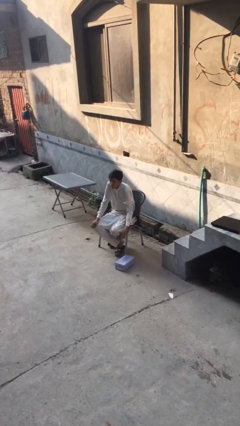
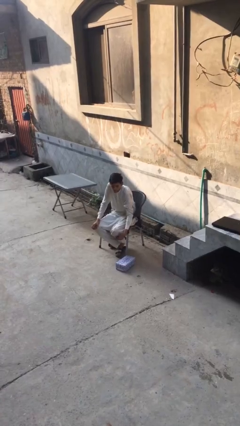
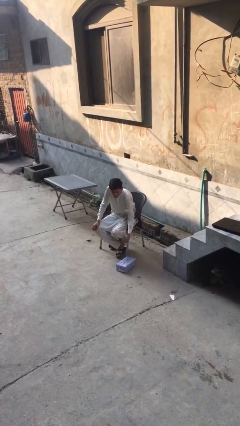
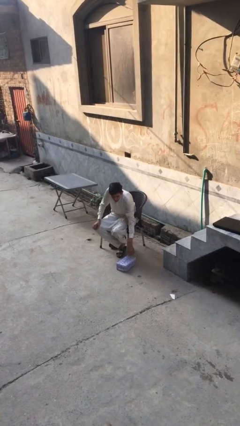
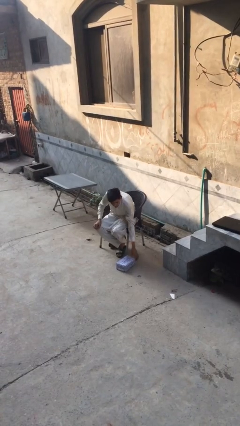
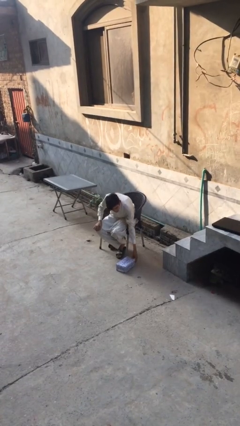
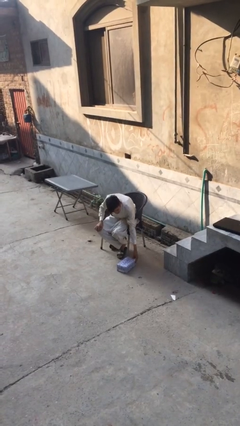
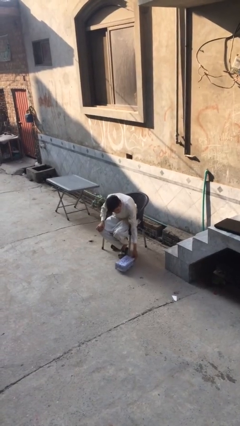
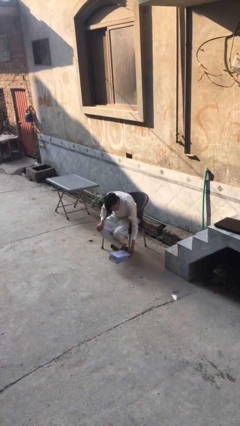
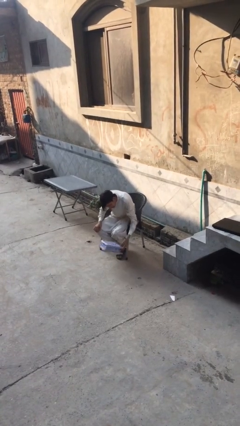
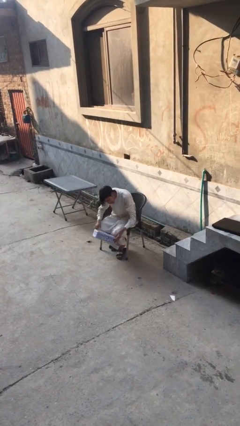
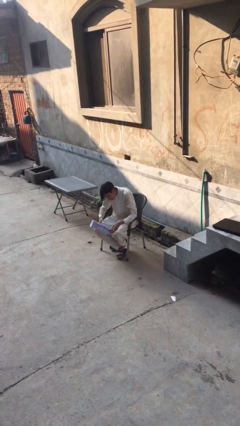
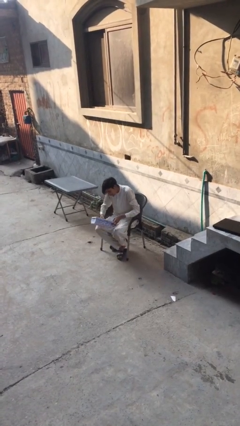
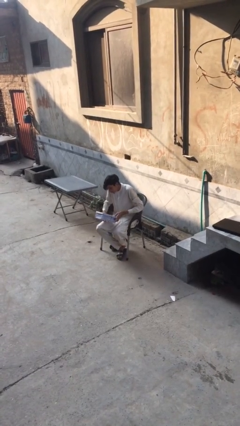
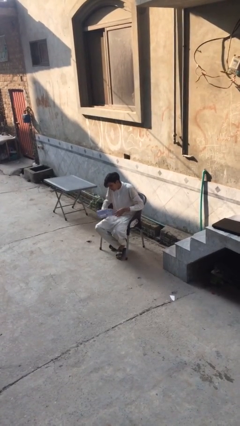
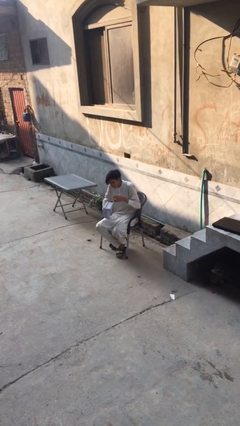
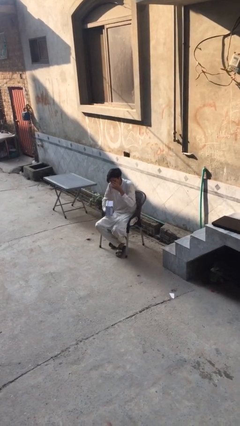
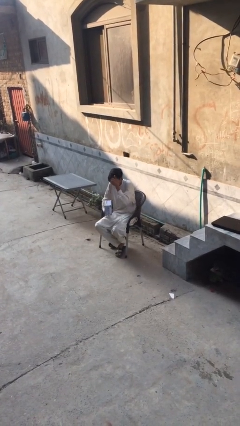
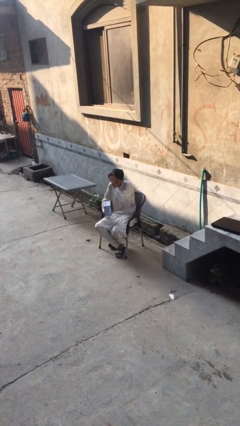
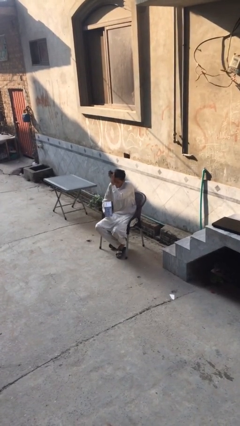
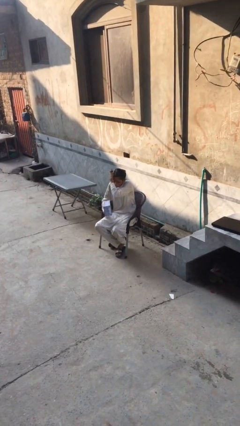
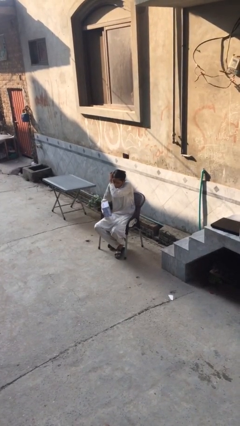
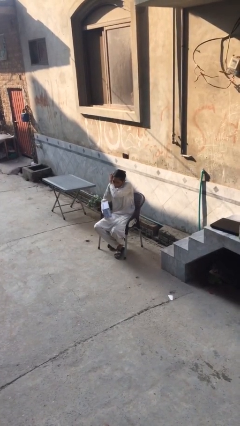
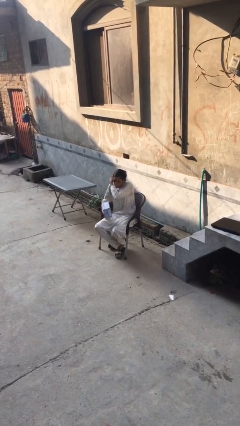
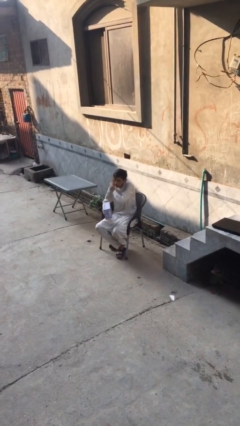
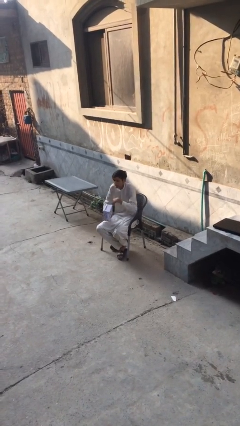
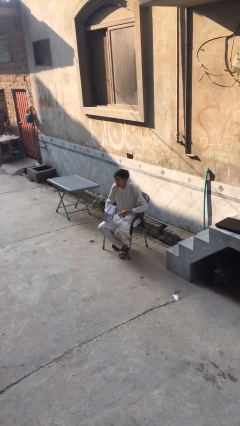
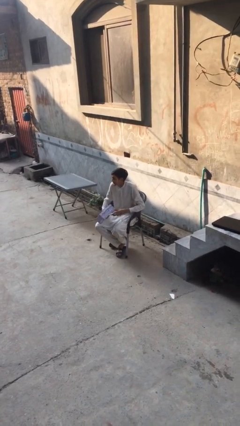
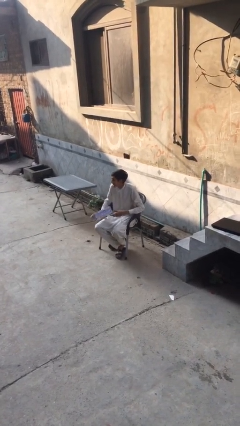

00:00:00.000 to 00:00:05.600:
person picks up object from floor

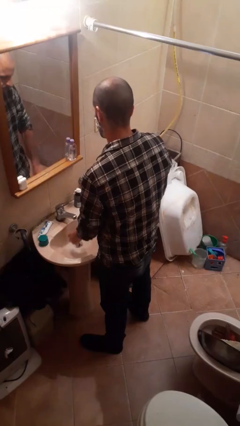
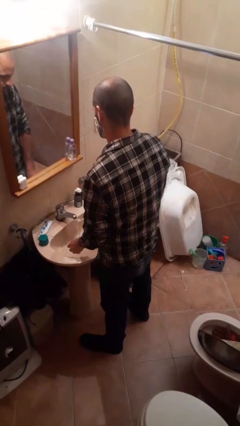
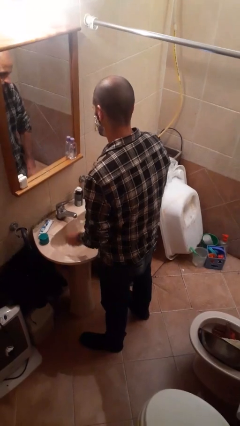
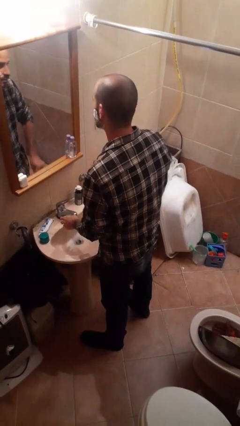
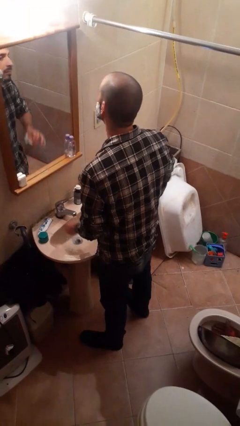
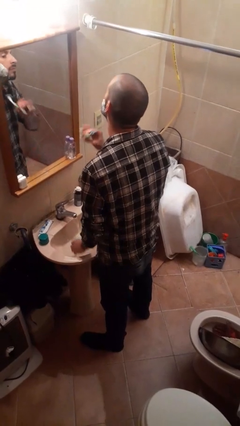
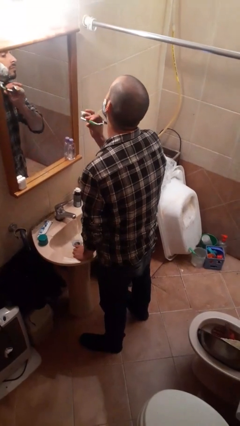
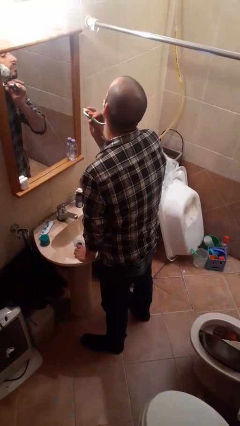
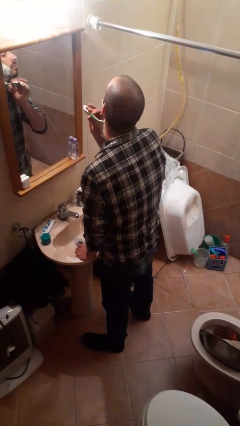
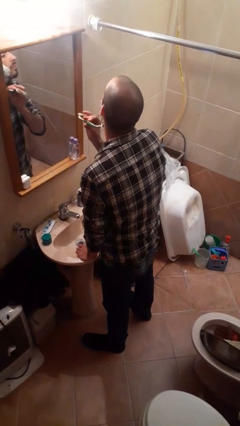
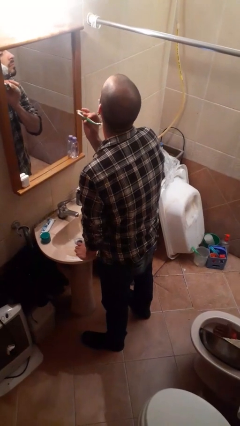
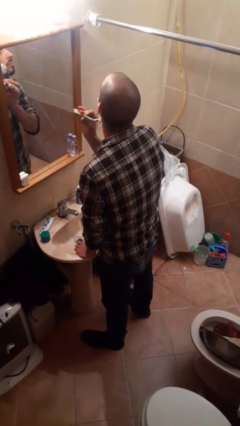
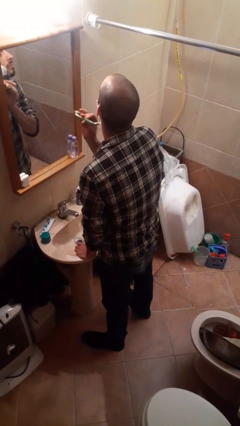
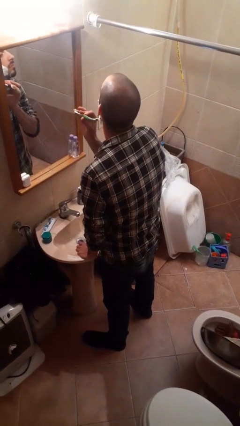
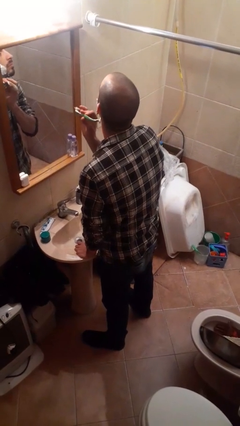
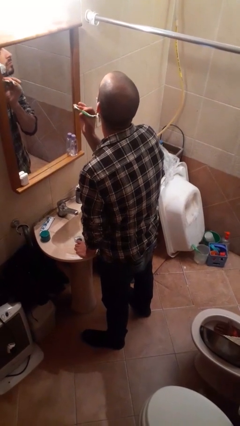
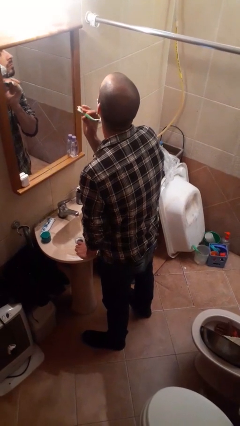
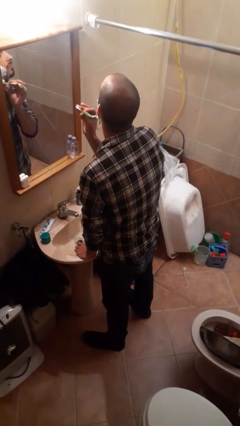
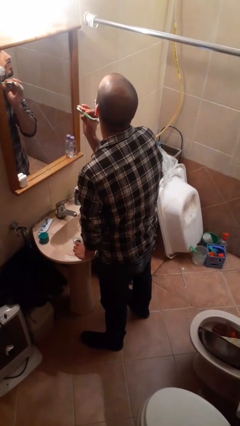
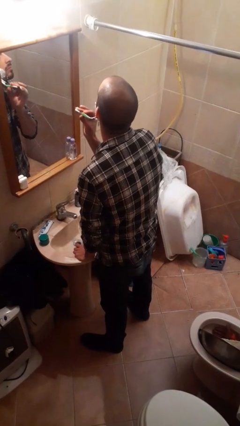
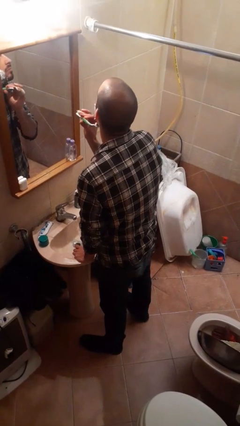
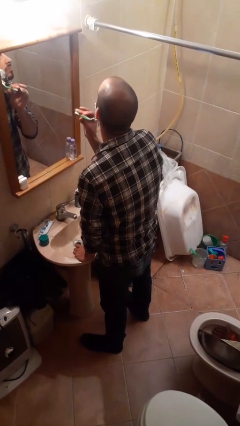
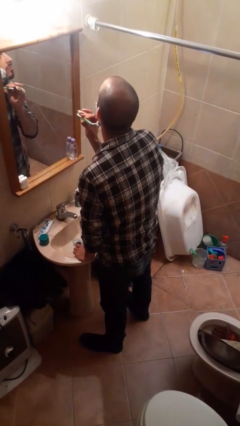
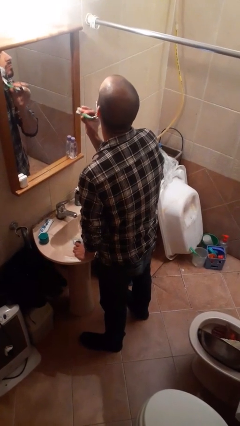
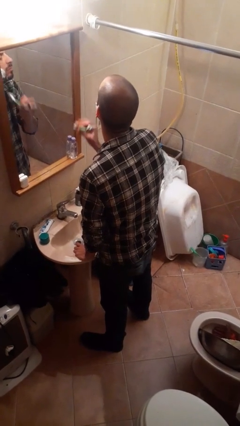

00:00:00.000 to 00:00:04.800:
person shaves face

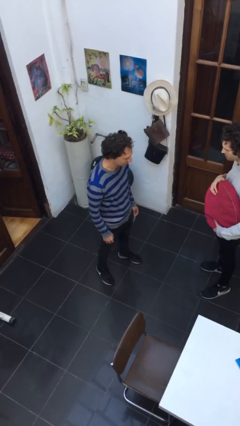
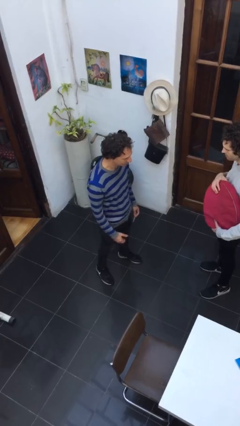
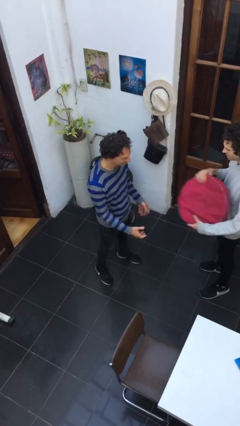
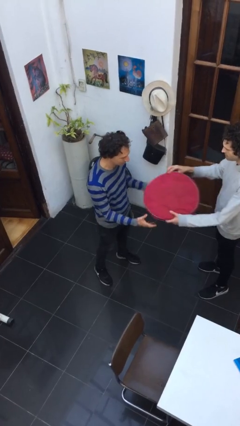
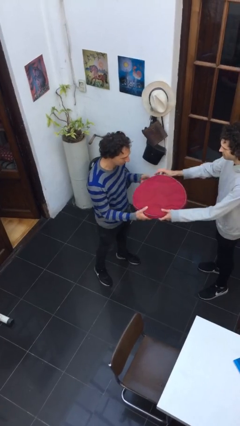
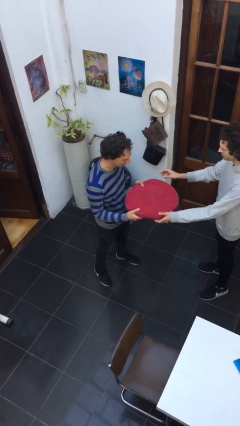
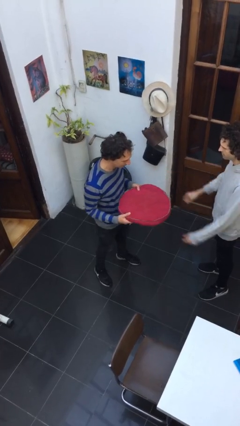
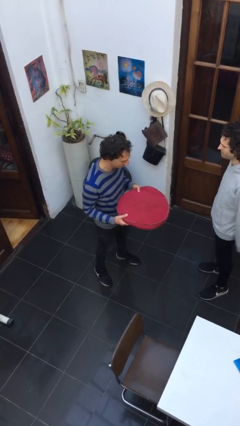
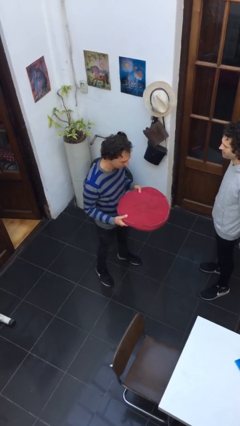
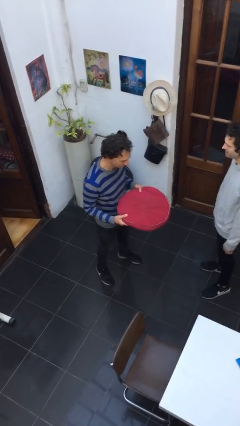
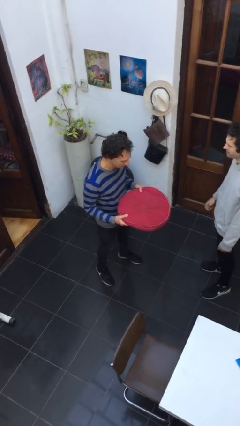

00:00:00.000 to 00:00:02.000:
person transfers object to person

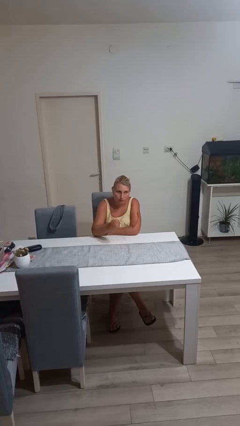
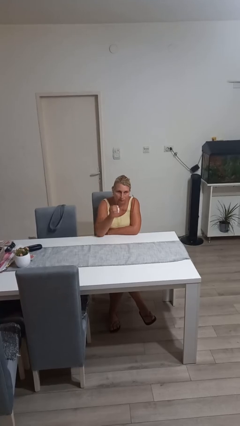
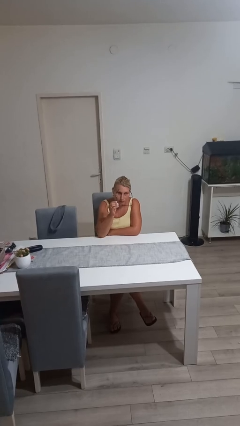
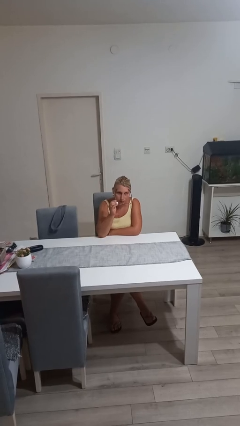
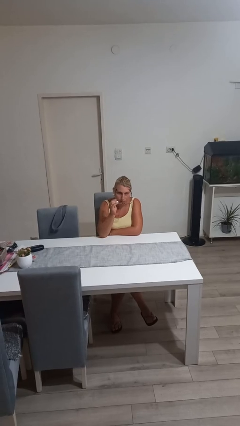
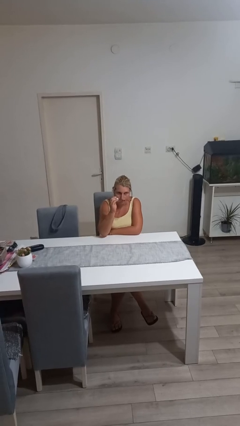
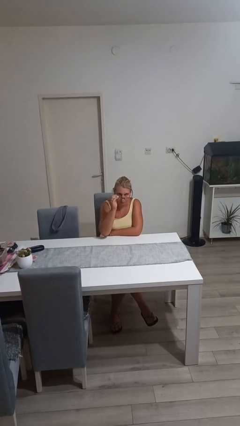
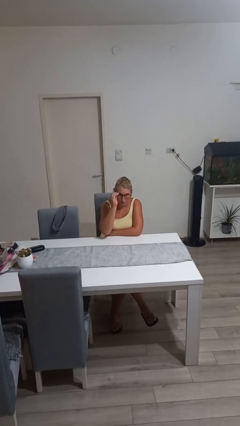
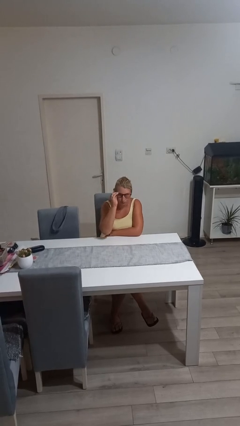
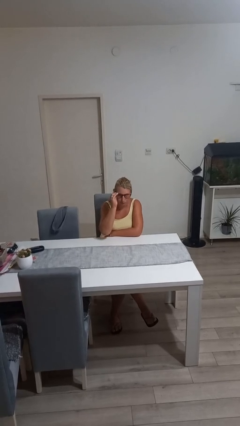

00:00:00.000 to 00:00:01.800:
person puts on glasses

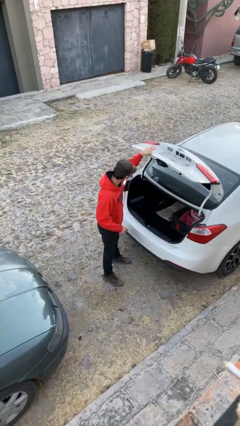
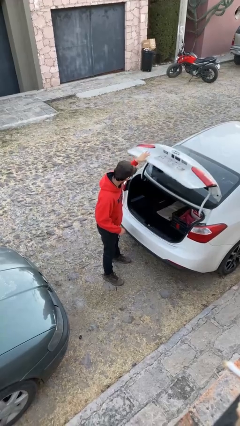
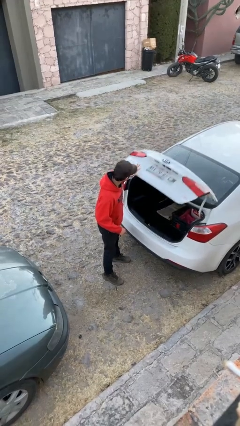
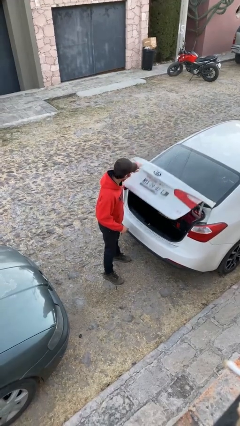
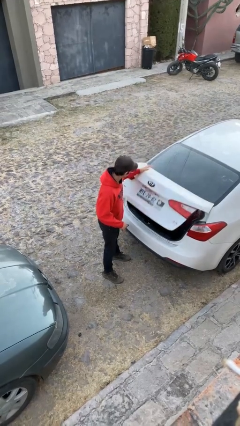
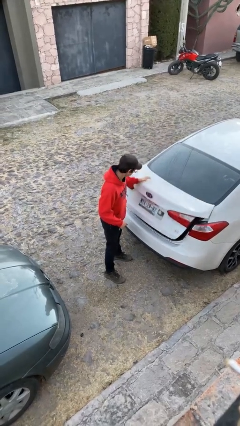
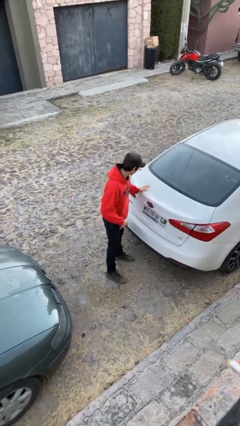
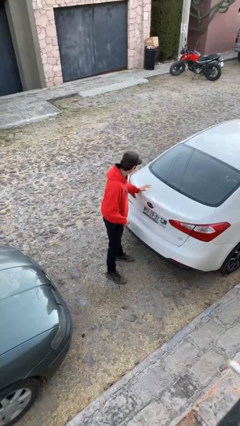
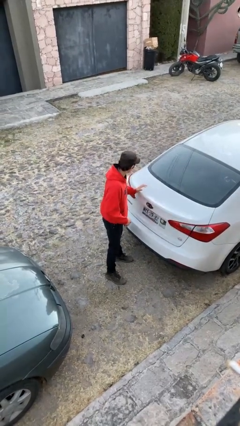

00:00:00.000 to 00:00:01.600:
person closes car trunk

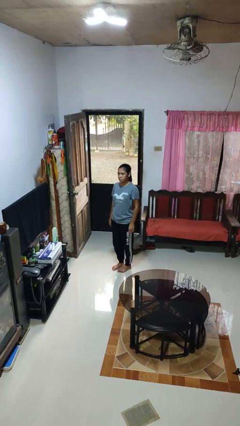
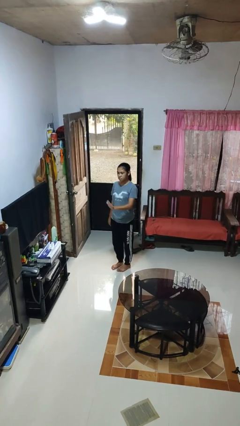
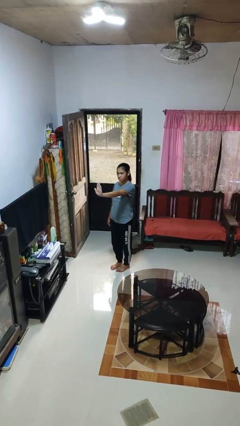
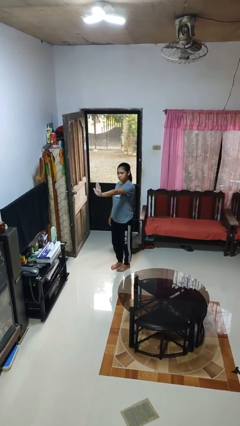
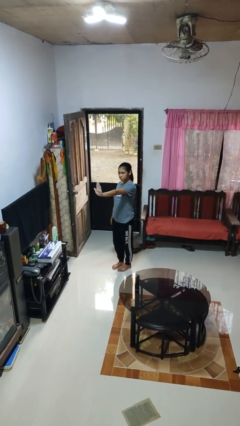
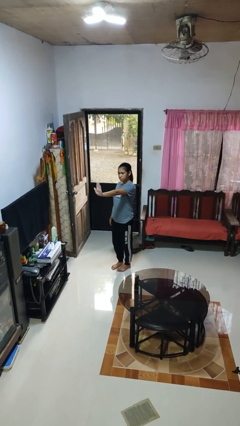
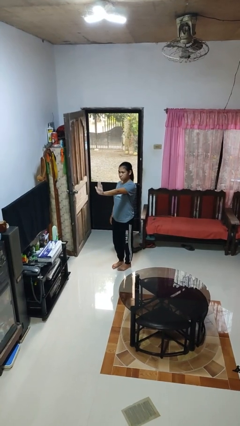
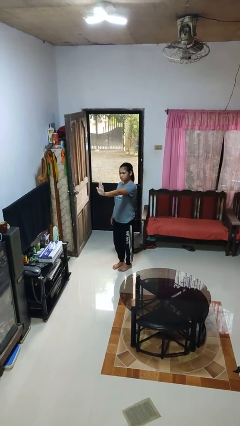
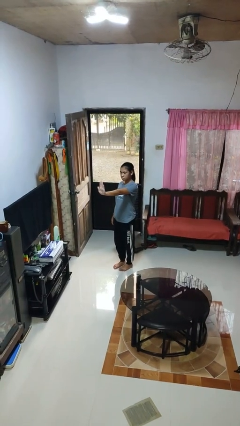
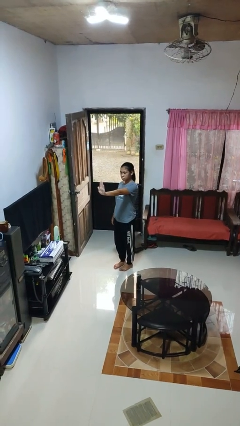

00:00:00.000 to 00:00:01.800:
person gestures stop
